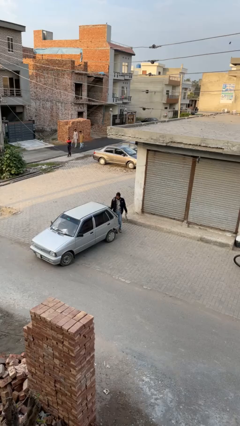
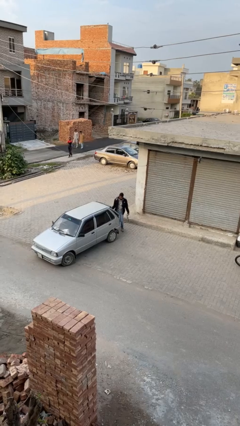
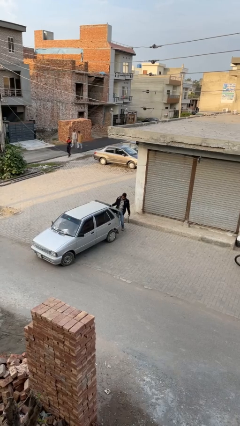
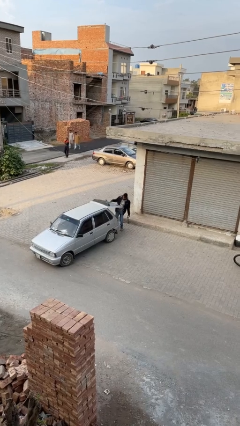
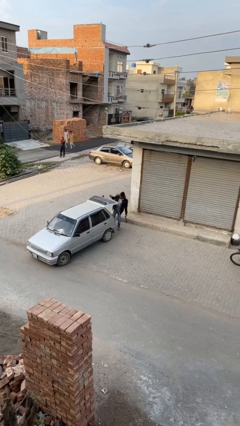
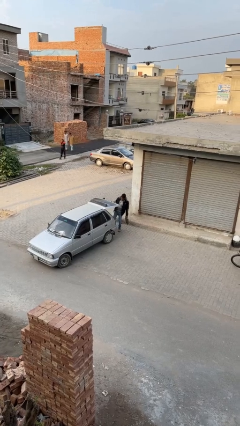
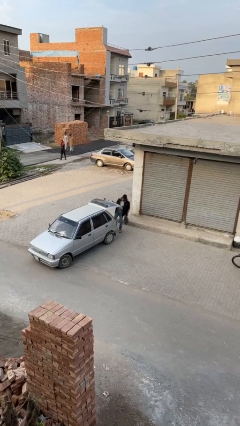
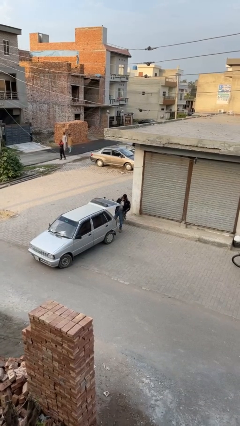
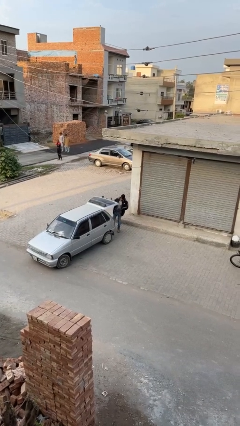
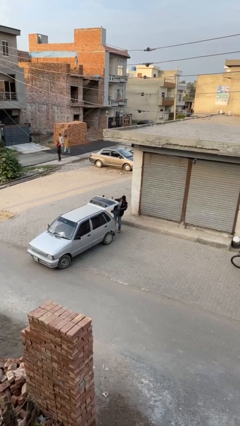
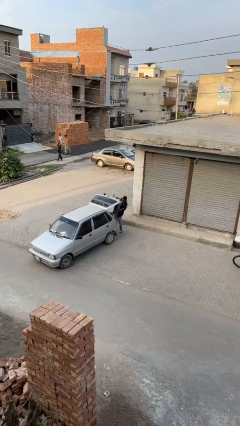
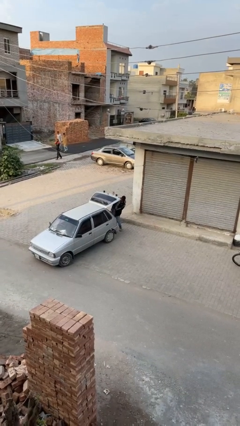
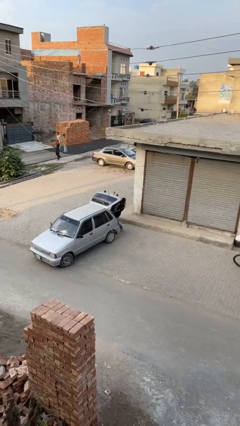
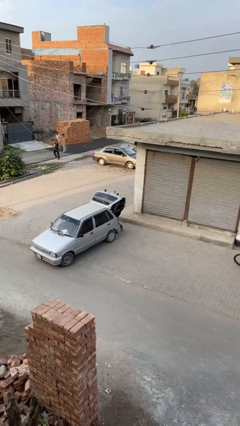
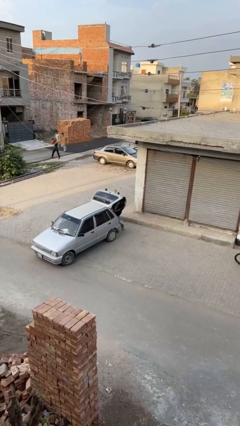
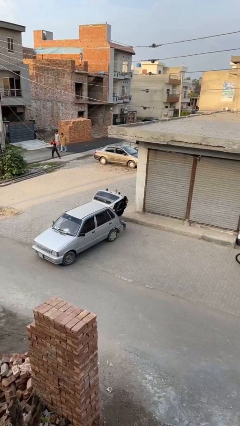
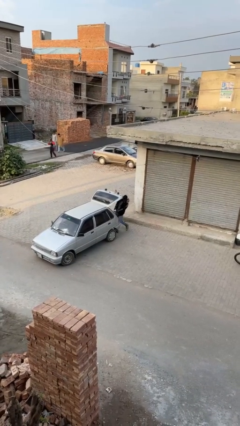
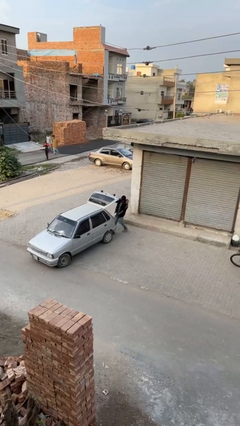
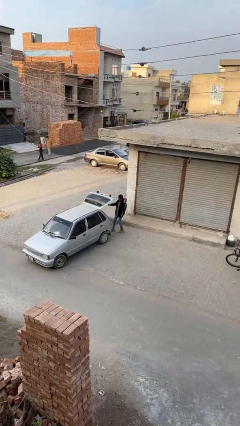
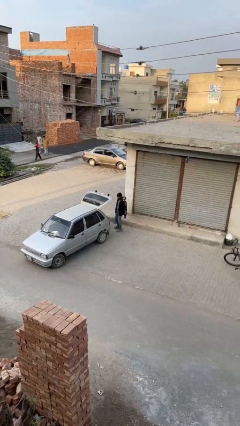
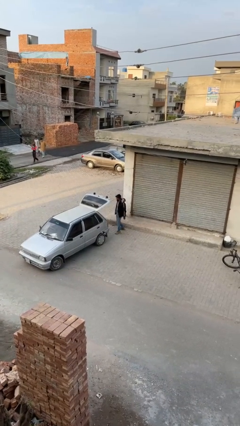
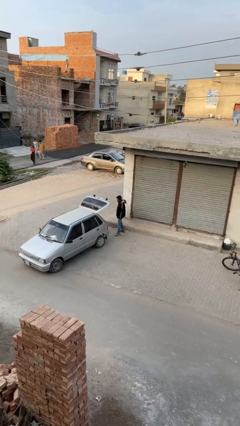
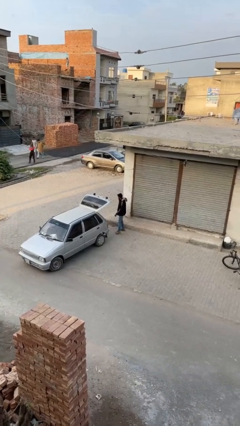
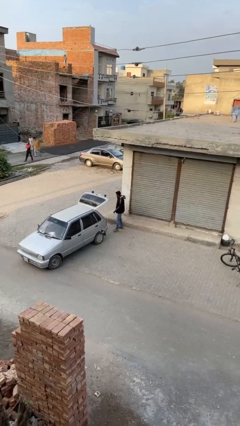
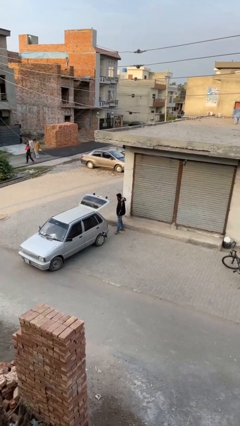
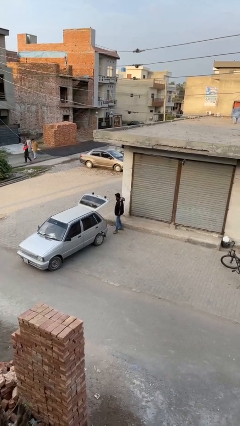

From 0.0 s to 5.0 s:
person loads car

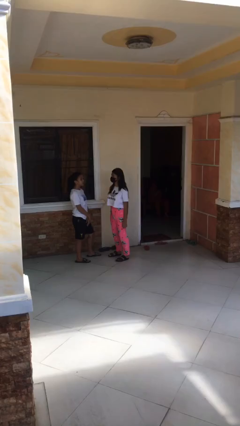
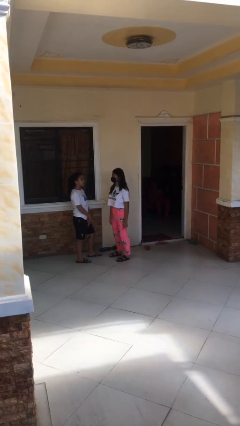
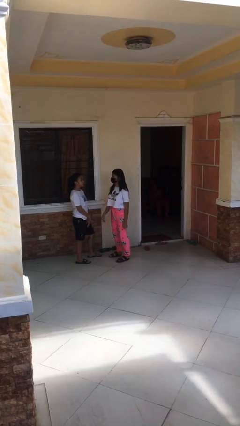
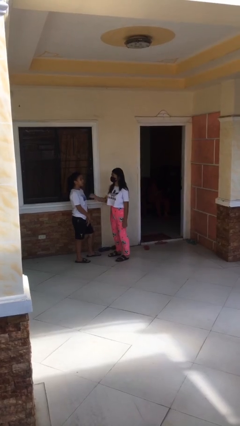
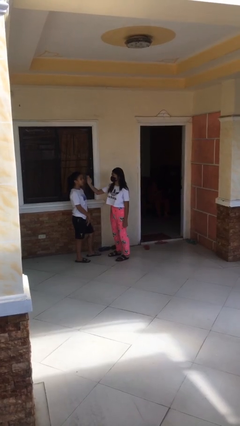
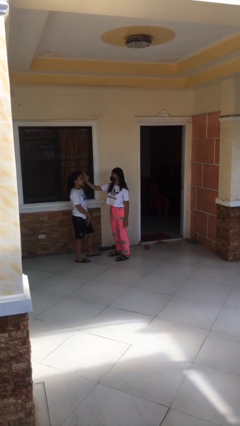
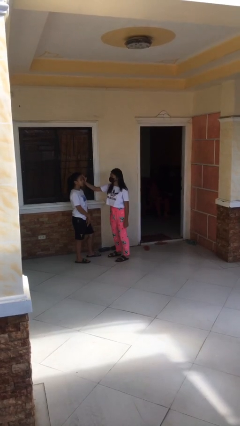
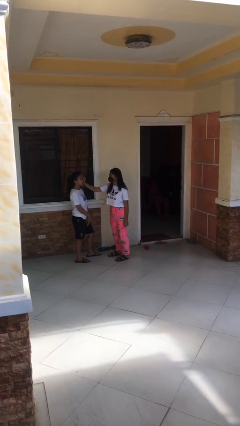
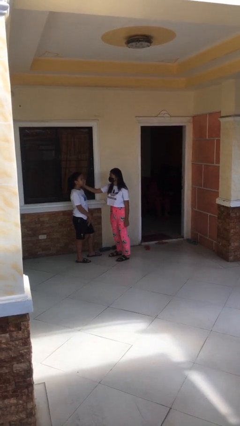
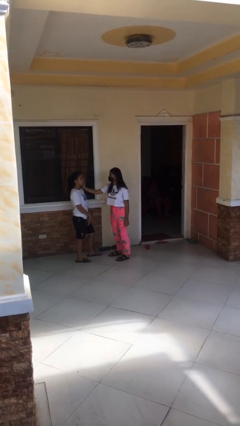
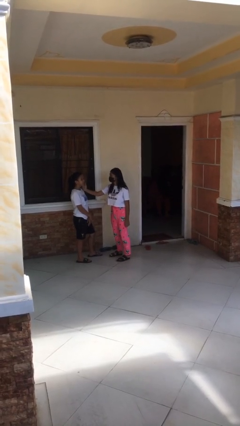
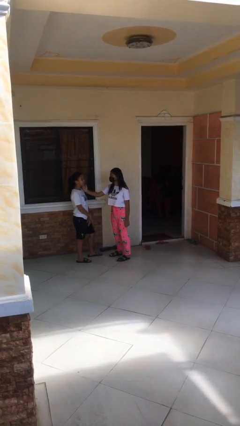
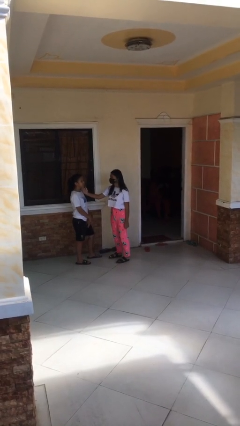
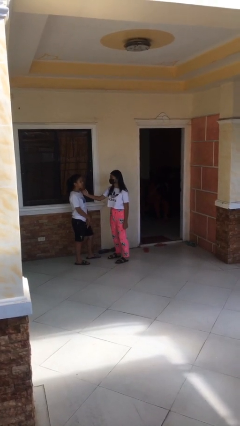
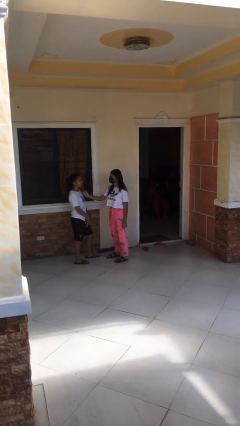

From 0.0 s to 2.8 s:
person touches face of person

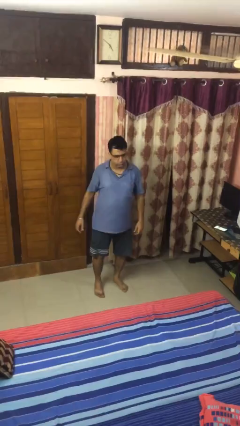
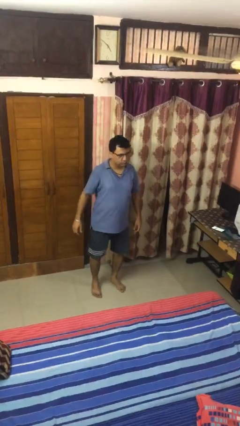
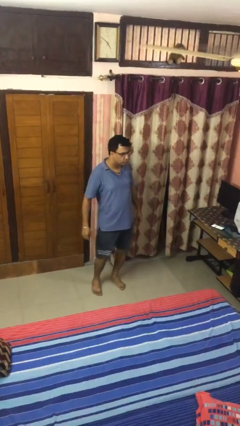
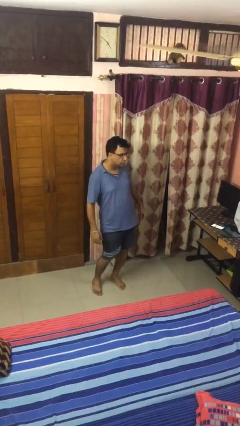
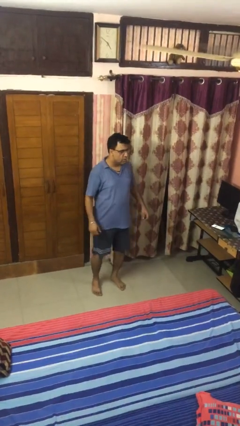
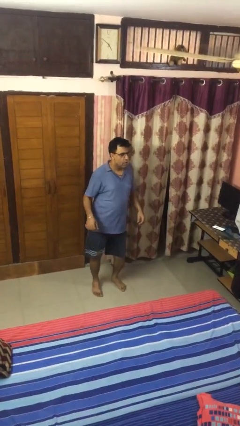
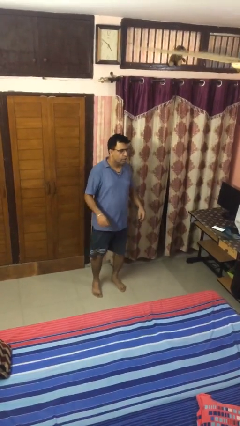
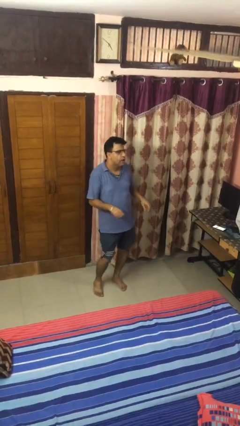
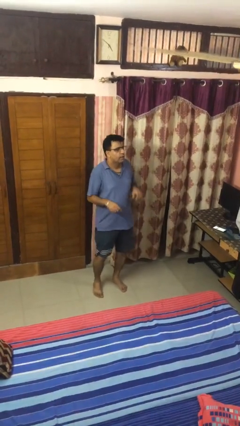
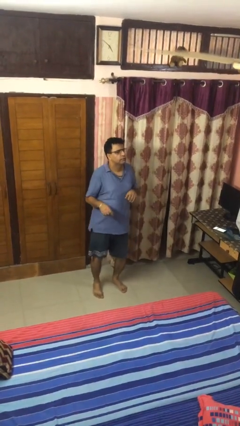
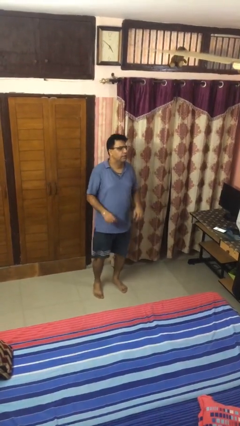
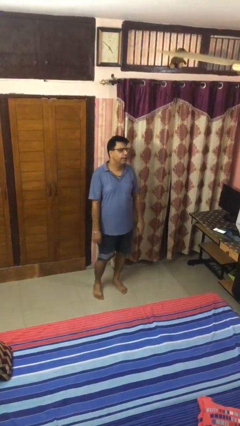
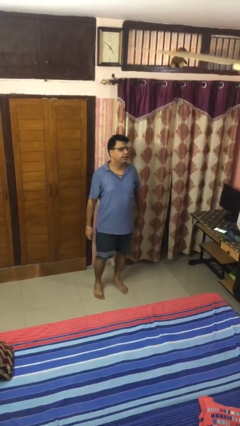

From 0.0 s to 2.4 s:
person dances in place

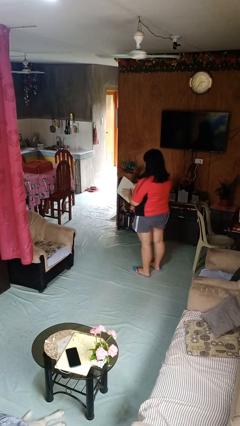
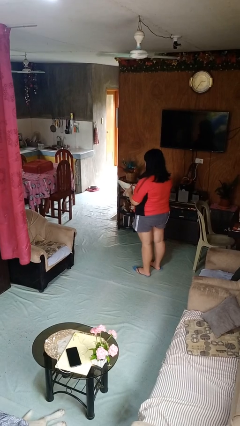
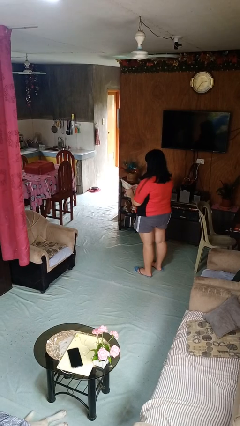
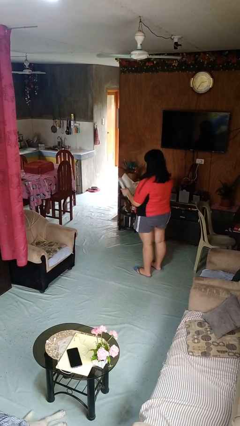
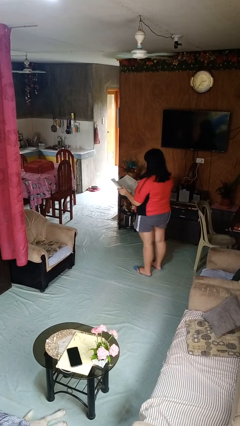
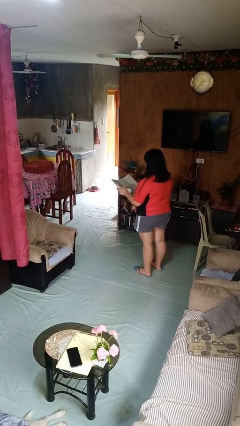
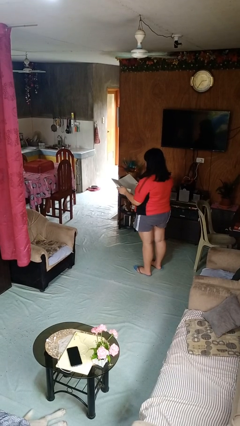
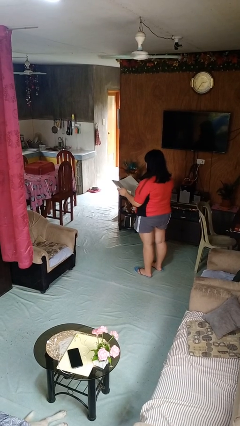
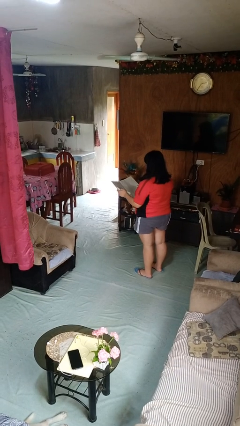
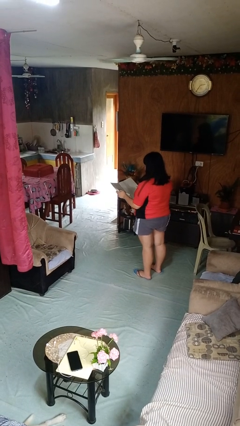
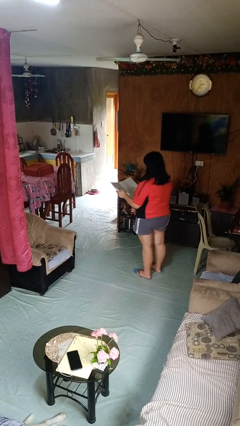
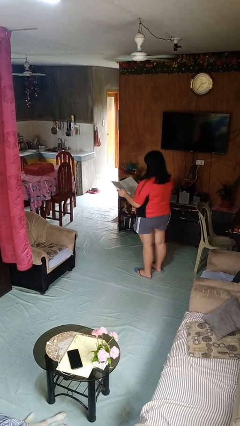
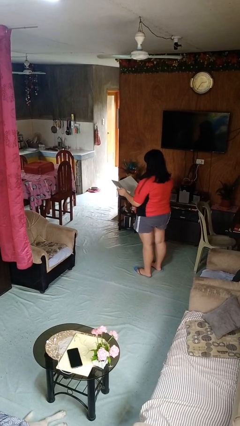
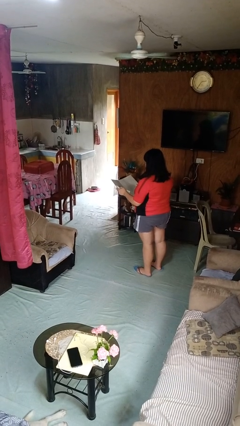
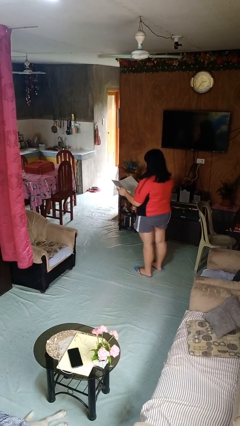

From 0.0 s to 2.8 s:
person reads newspaper

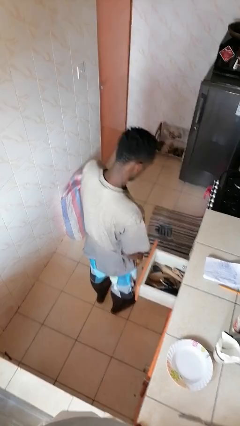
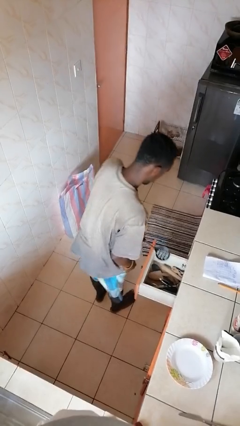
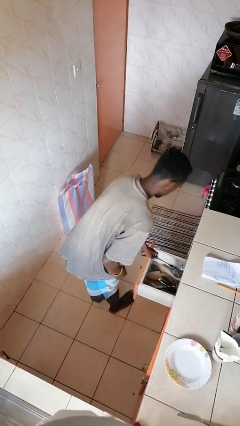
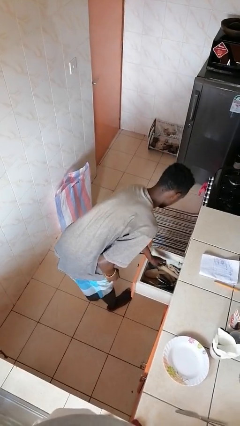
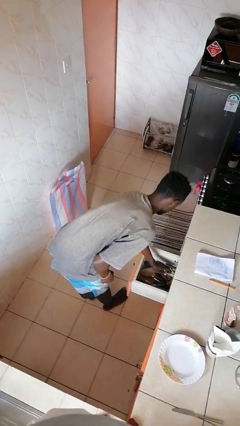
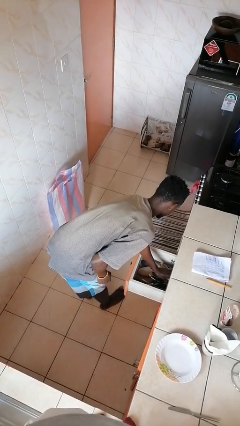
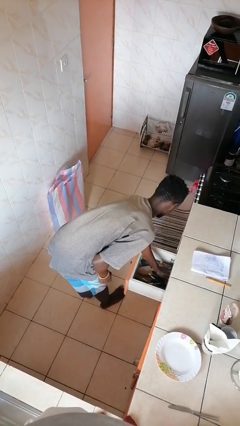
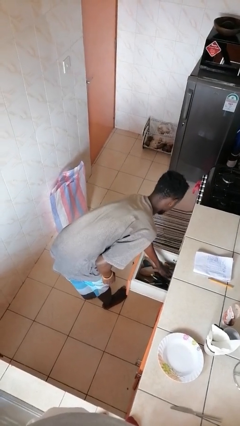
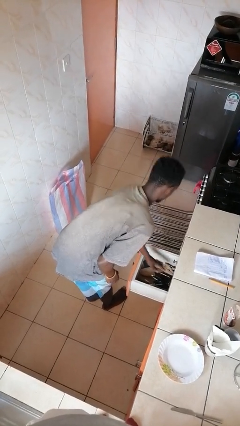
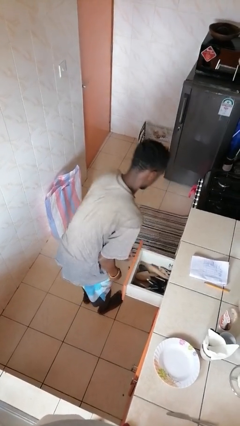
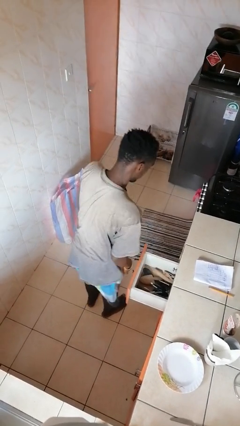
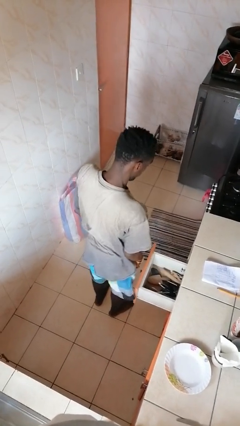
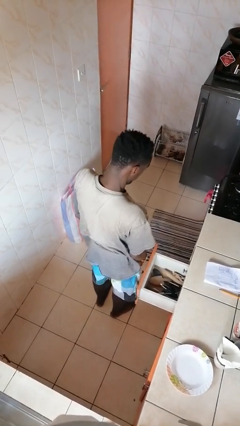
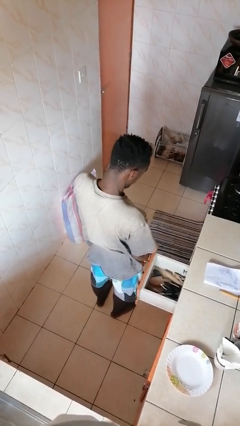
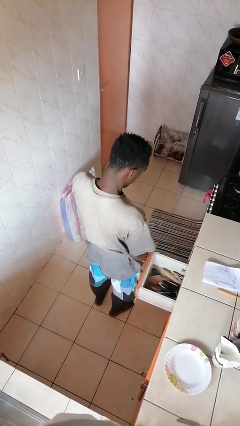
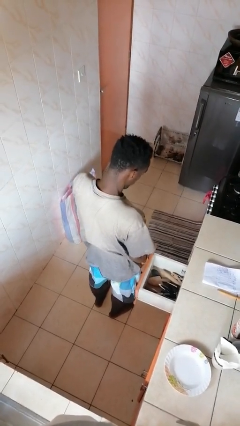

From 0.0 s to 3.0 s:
person puts object into kitchen drawer

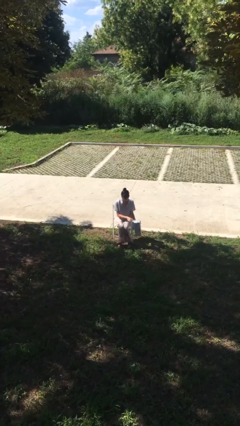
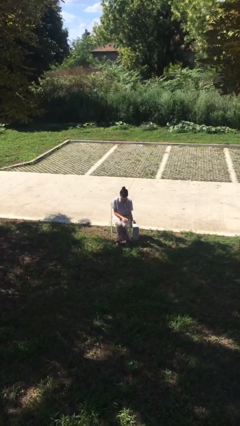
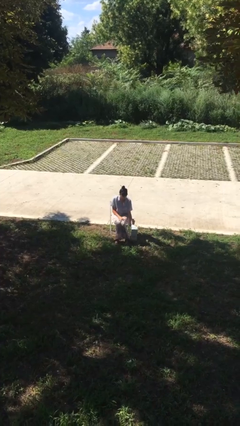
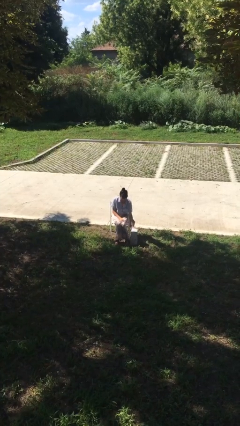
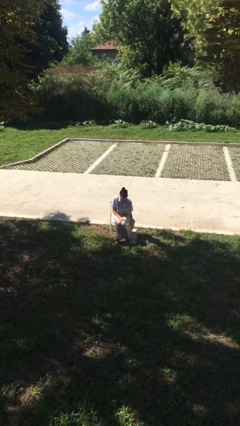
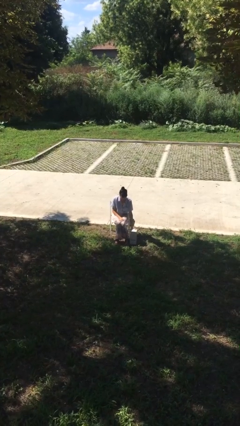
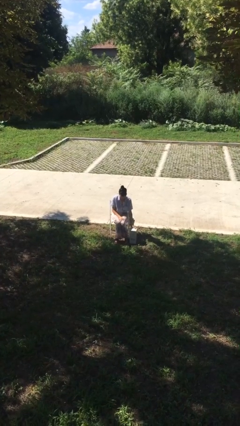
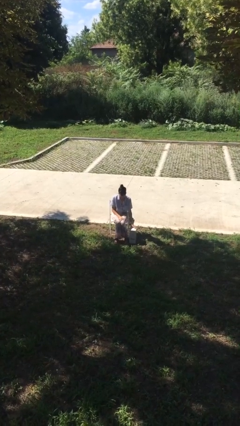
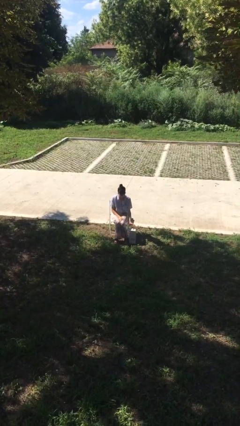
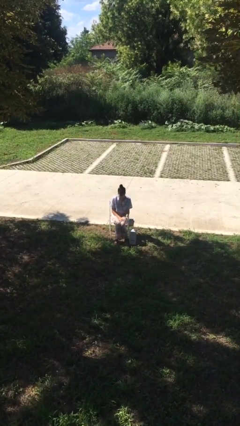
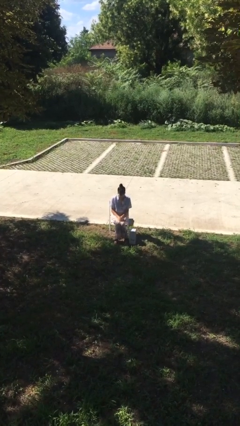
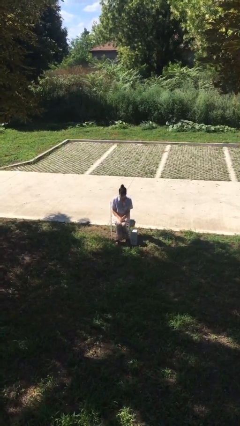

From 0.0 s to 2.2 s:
person puts down object on floor
